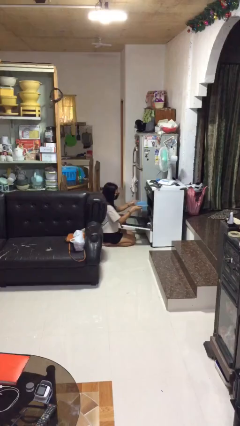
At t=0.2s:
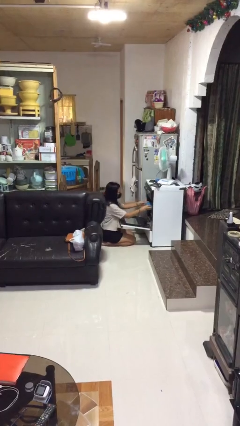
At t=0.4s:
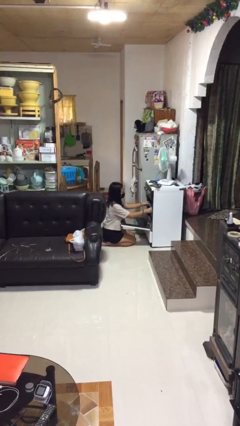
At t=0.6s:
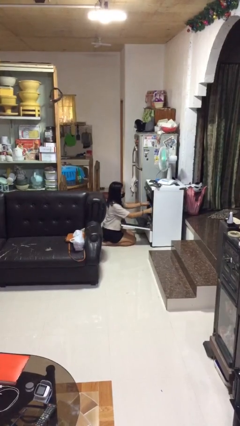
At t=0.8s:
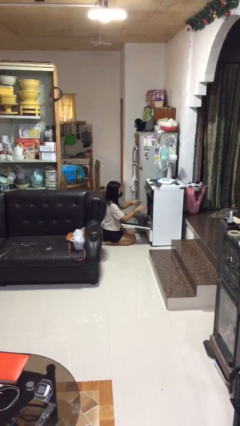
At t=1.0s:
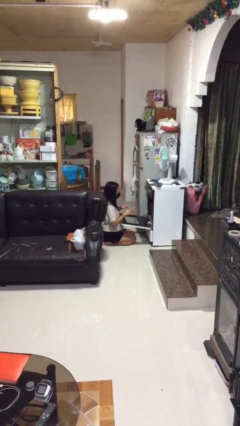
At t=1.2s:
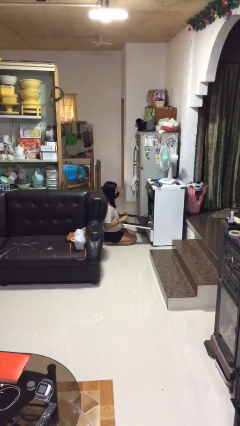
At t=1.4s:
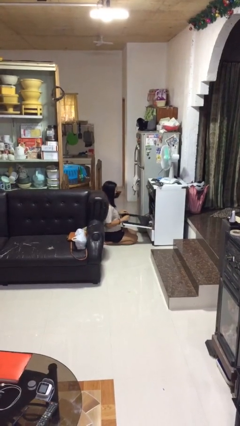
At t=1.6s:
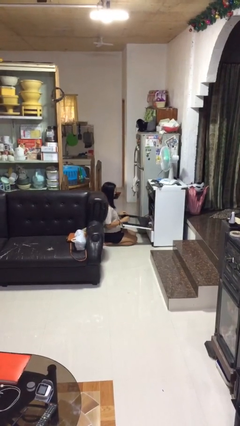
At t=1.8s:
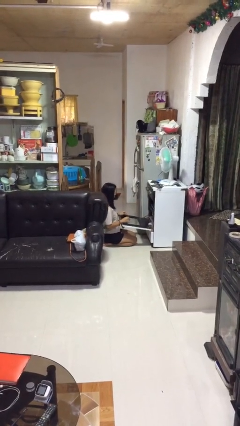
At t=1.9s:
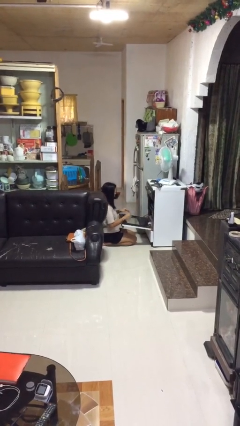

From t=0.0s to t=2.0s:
person puts object into oven

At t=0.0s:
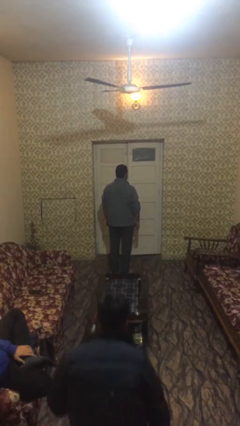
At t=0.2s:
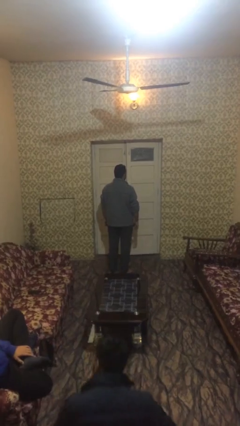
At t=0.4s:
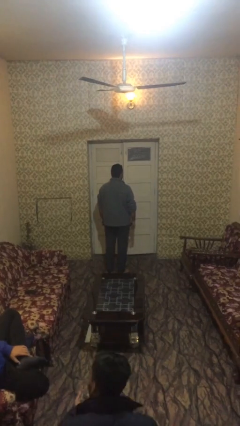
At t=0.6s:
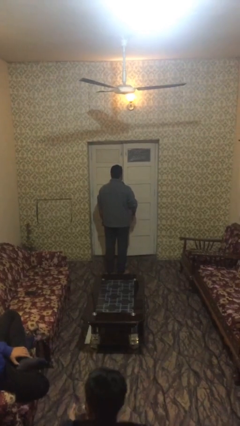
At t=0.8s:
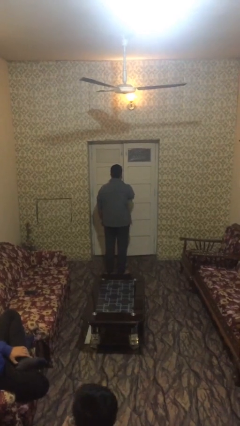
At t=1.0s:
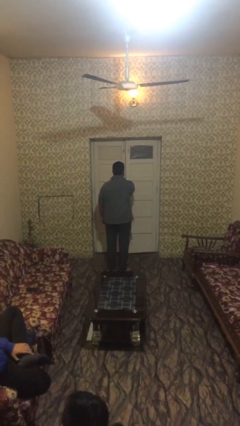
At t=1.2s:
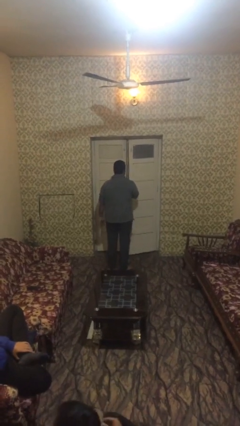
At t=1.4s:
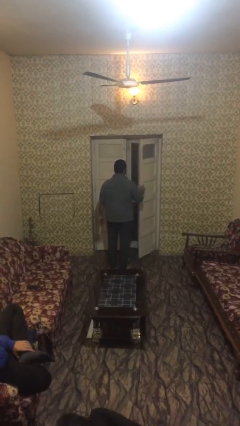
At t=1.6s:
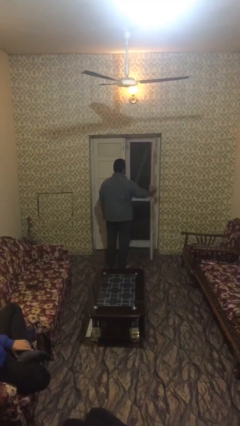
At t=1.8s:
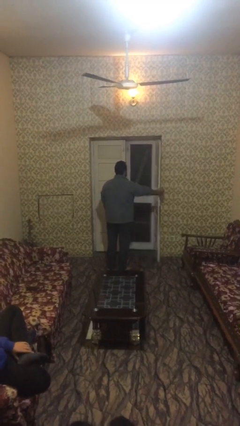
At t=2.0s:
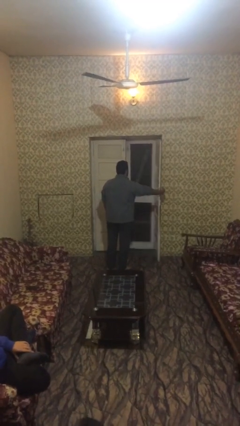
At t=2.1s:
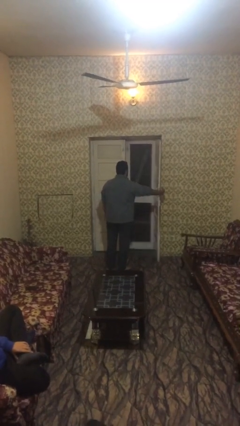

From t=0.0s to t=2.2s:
person opens facility door

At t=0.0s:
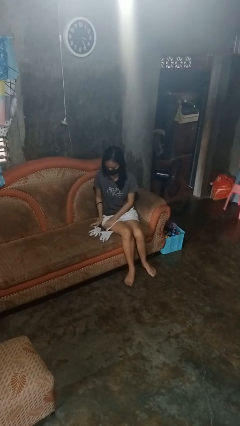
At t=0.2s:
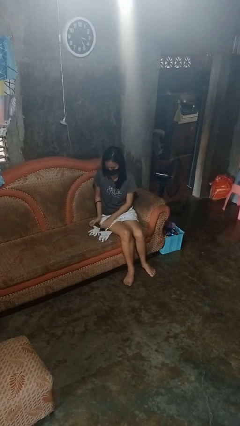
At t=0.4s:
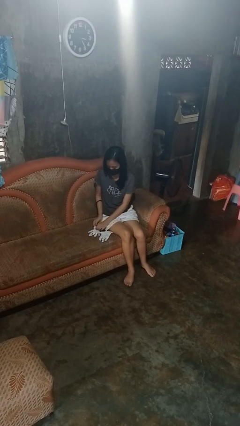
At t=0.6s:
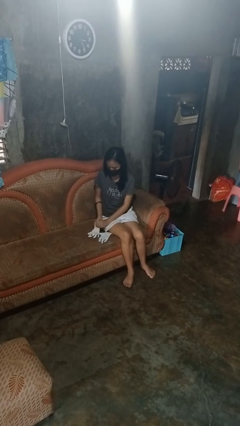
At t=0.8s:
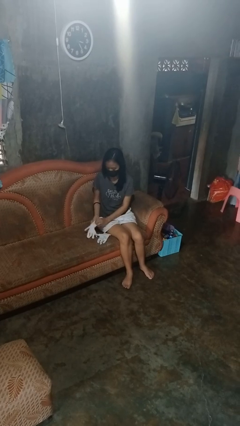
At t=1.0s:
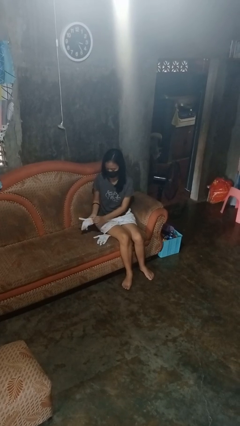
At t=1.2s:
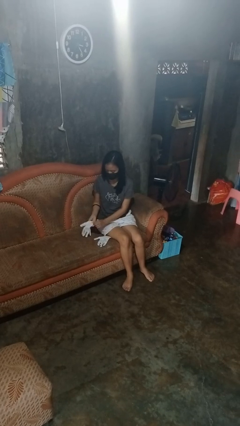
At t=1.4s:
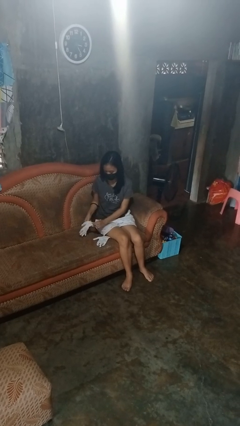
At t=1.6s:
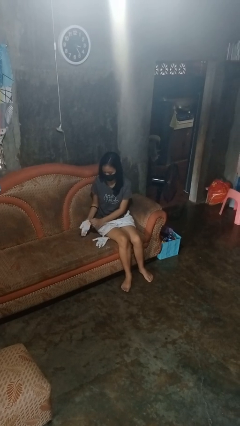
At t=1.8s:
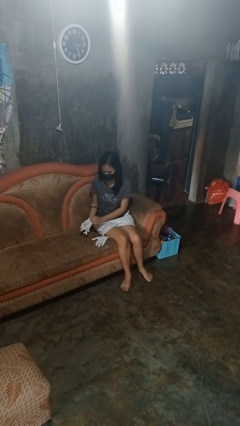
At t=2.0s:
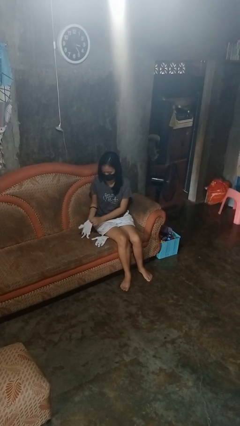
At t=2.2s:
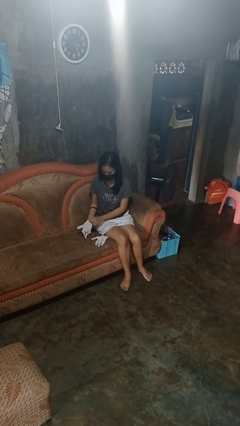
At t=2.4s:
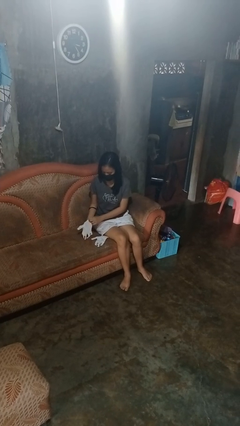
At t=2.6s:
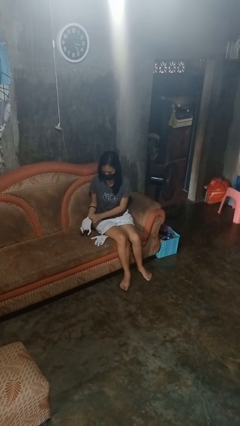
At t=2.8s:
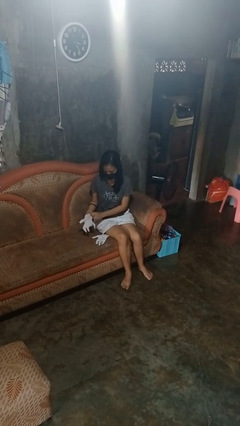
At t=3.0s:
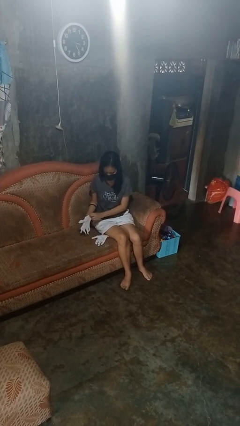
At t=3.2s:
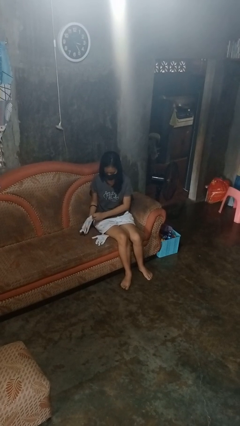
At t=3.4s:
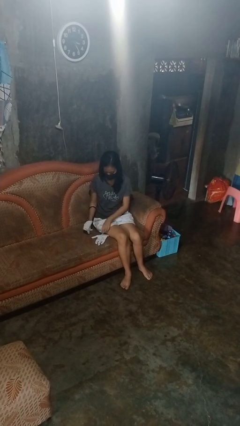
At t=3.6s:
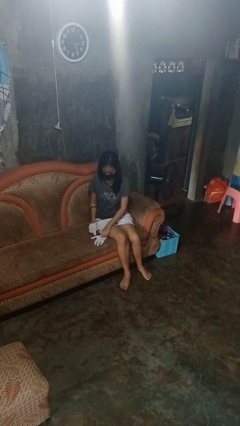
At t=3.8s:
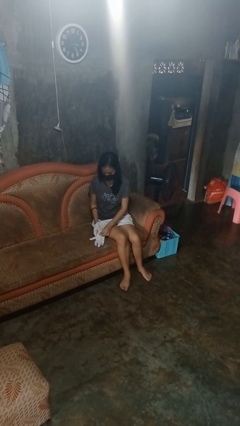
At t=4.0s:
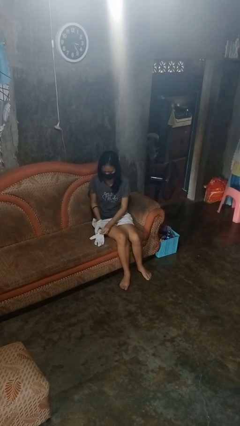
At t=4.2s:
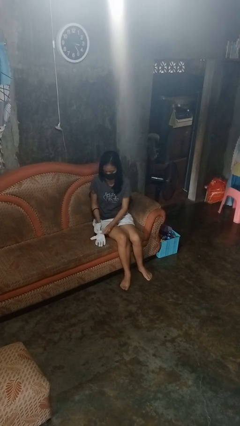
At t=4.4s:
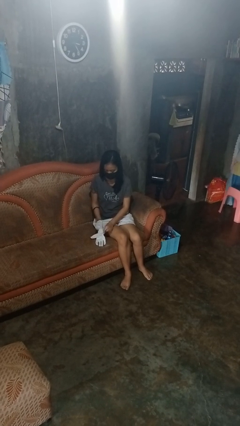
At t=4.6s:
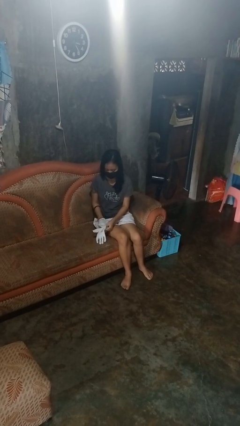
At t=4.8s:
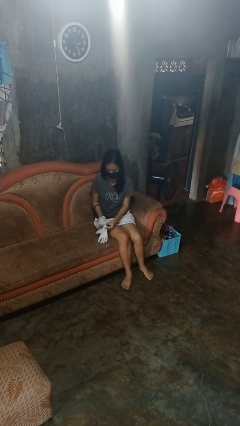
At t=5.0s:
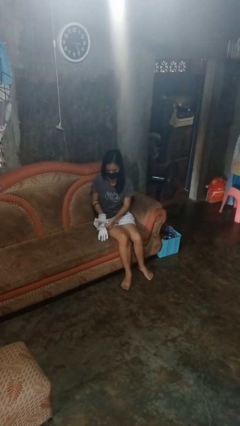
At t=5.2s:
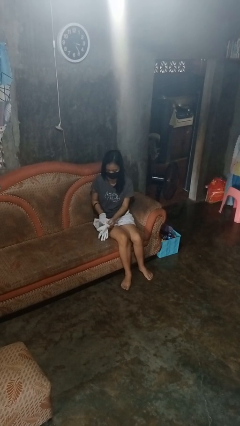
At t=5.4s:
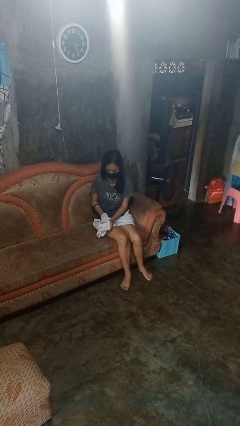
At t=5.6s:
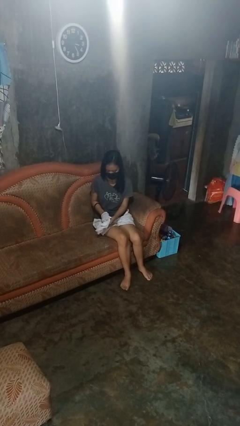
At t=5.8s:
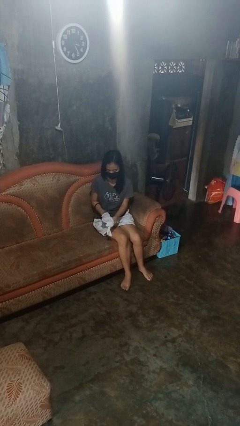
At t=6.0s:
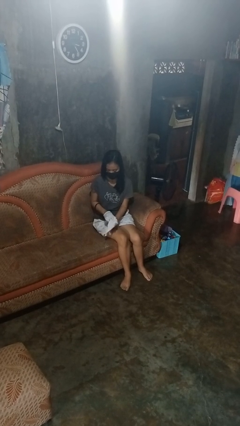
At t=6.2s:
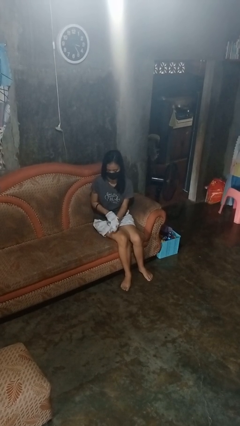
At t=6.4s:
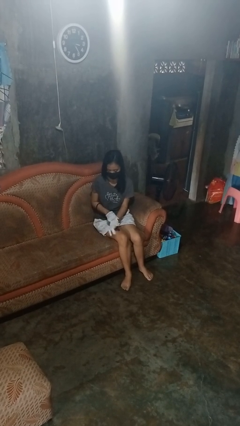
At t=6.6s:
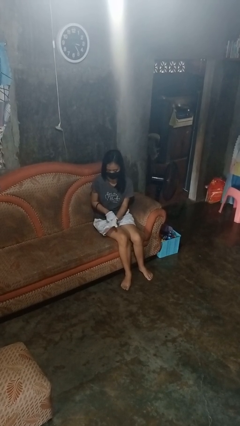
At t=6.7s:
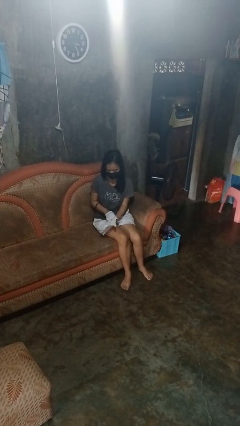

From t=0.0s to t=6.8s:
person puts on gloves

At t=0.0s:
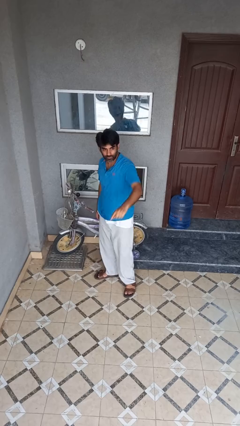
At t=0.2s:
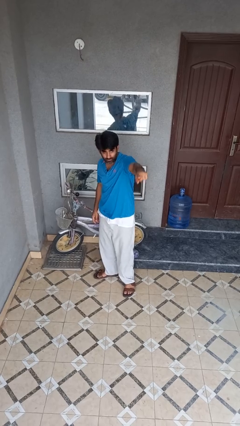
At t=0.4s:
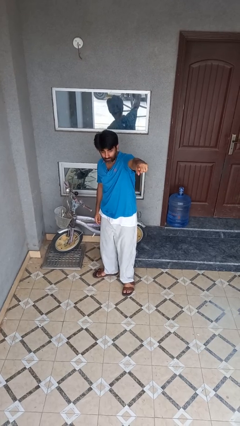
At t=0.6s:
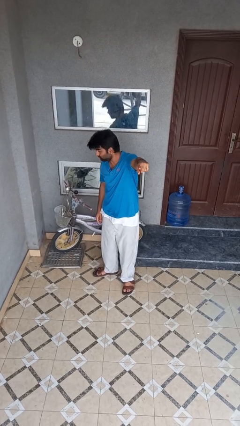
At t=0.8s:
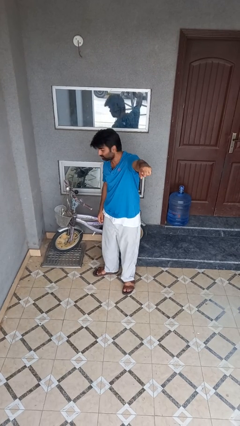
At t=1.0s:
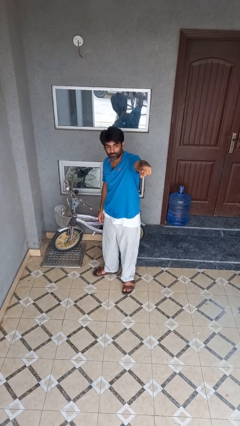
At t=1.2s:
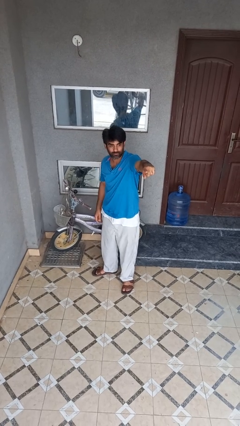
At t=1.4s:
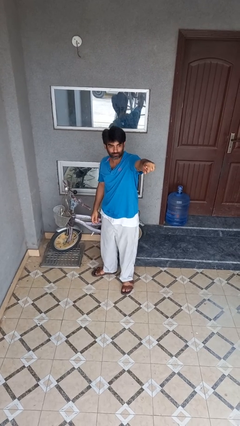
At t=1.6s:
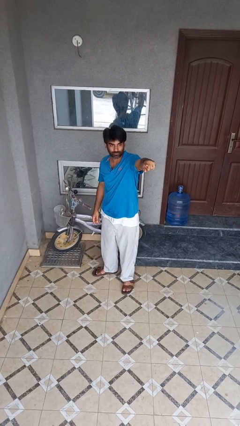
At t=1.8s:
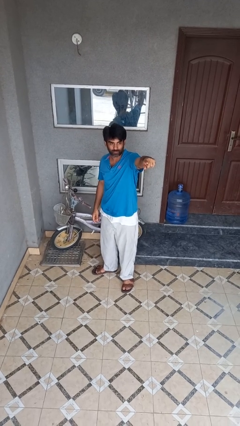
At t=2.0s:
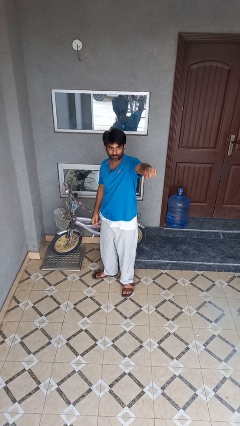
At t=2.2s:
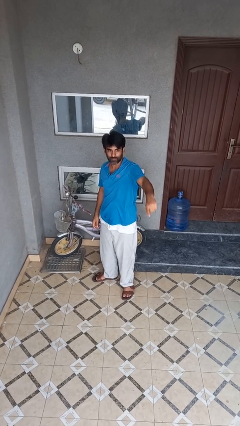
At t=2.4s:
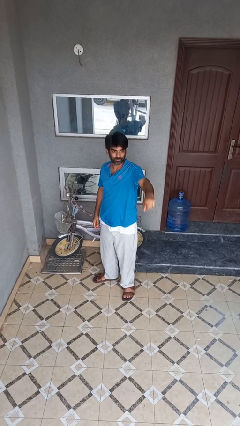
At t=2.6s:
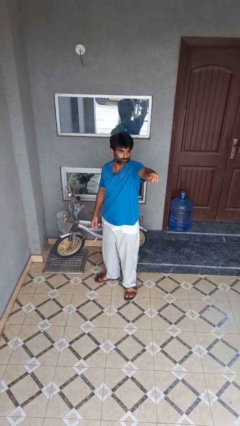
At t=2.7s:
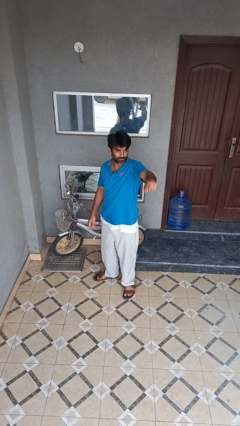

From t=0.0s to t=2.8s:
person points at person

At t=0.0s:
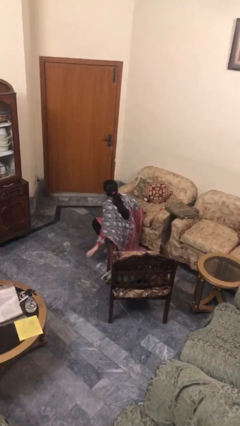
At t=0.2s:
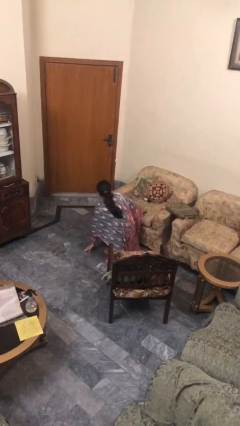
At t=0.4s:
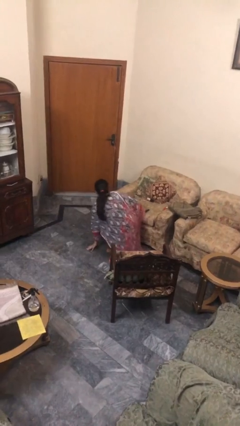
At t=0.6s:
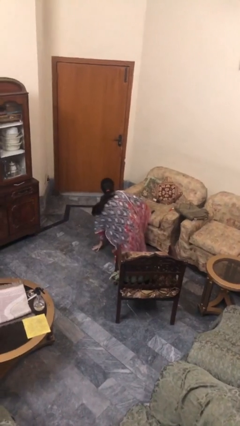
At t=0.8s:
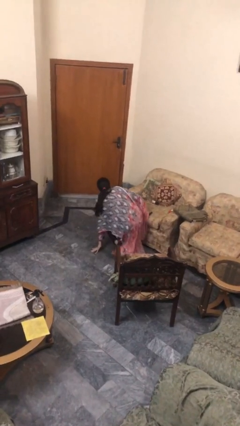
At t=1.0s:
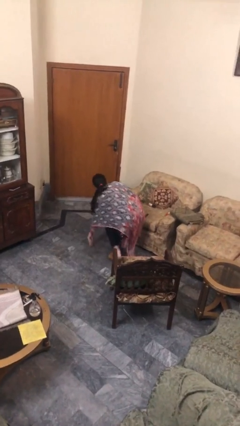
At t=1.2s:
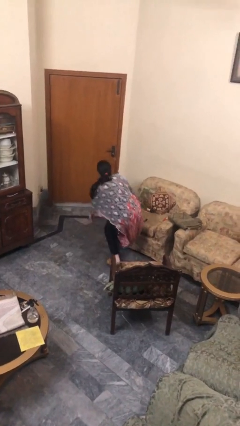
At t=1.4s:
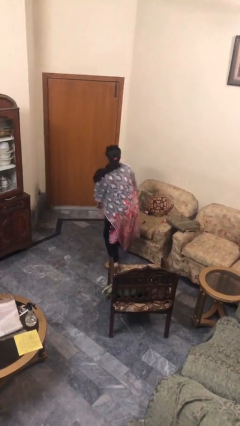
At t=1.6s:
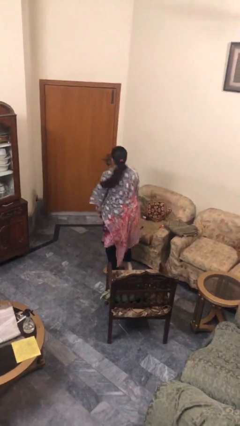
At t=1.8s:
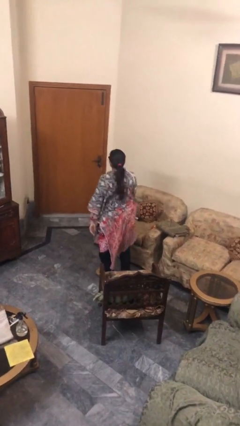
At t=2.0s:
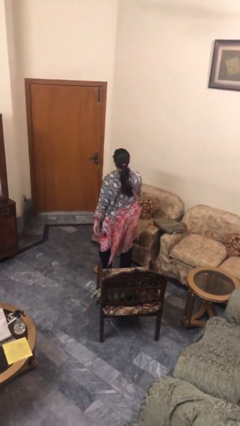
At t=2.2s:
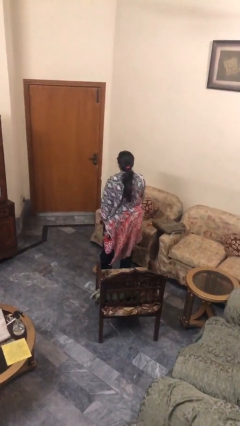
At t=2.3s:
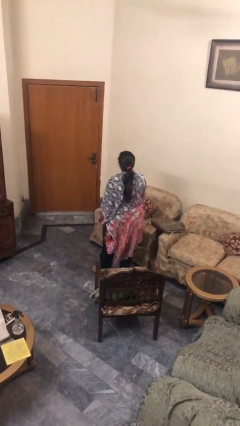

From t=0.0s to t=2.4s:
person stands up from floor

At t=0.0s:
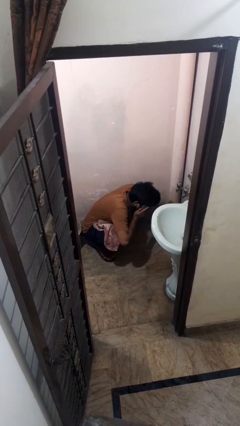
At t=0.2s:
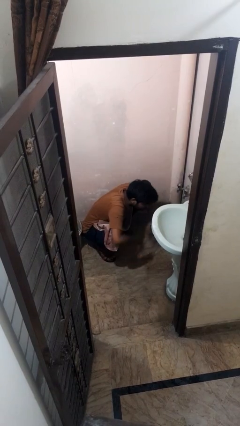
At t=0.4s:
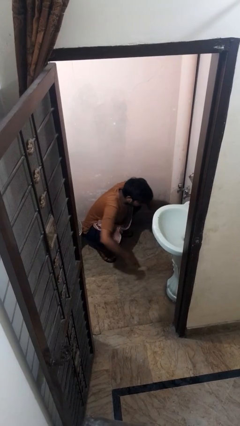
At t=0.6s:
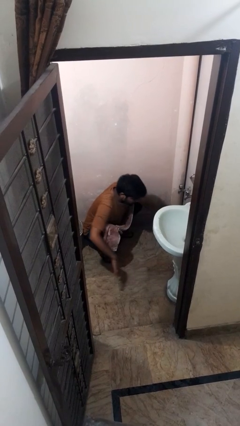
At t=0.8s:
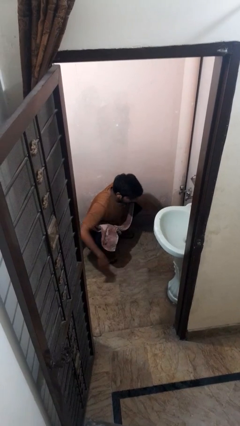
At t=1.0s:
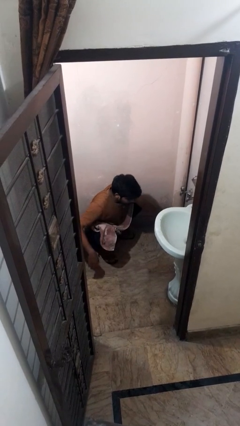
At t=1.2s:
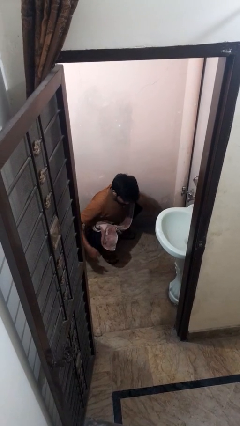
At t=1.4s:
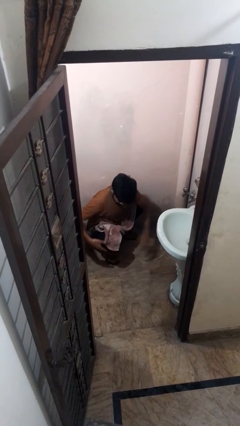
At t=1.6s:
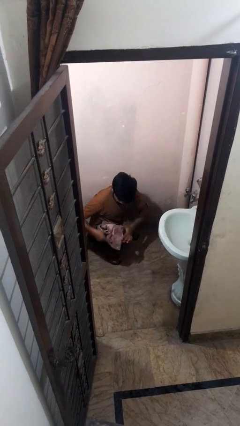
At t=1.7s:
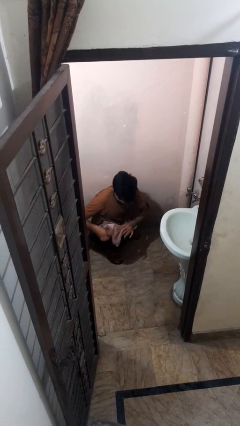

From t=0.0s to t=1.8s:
person throws object on bed
